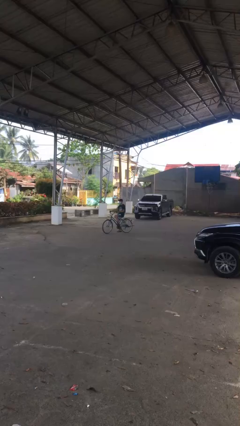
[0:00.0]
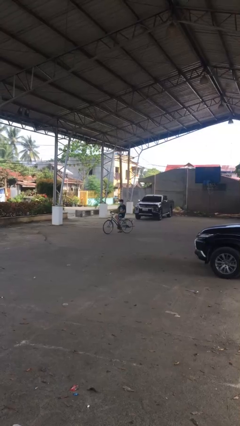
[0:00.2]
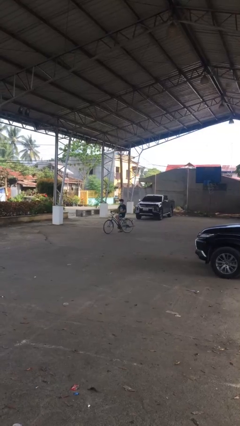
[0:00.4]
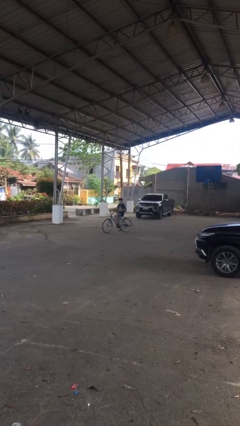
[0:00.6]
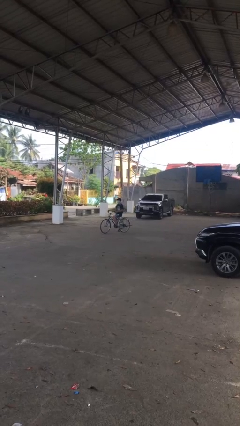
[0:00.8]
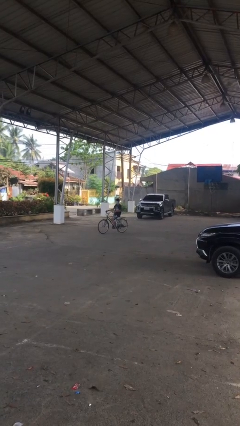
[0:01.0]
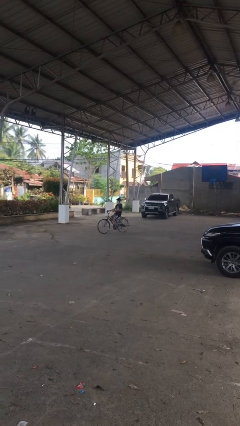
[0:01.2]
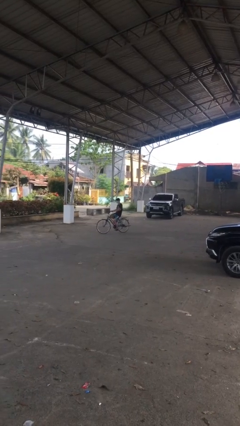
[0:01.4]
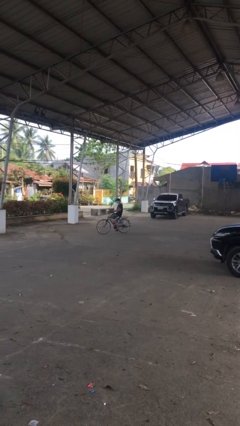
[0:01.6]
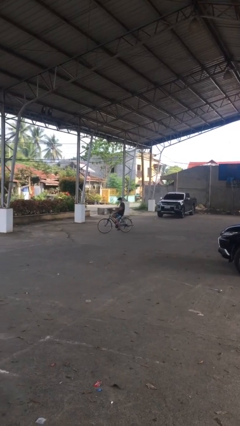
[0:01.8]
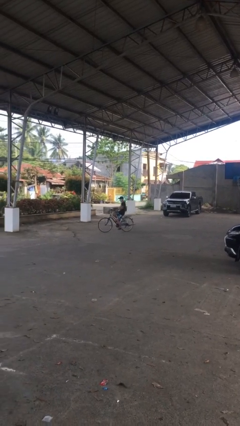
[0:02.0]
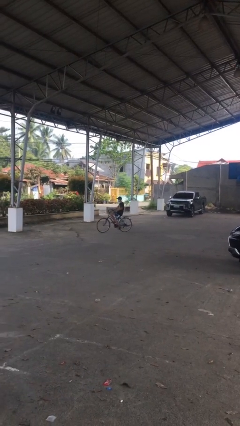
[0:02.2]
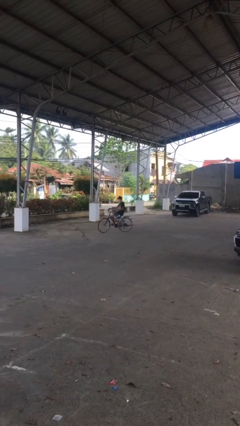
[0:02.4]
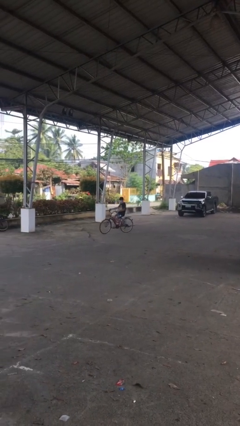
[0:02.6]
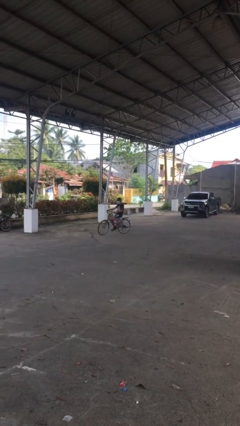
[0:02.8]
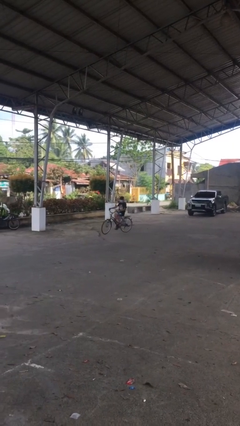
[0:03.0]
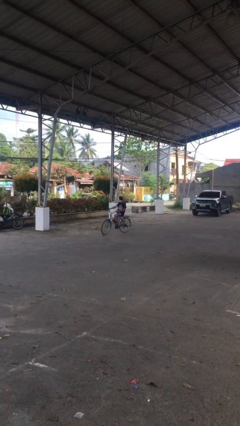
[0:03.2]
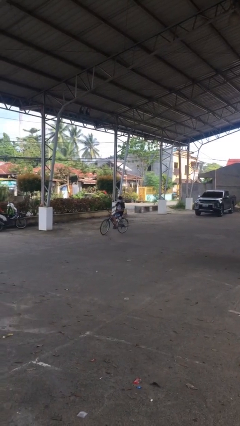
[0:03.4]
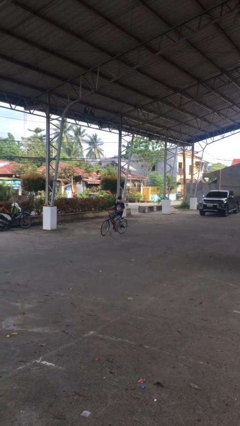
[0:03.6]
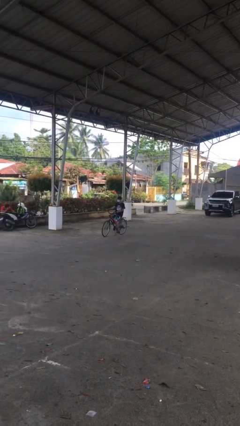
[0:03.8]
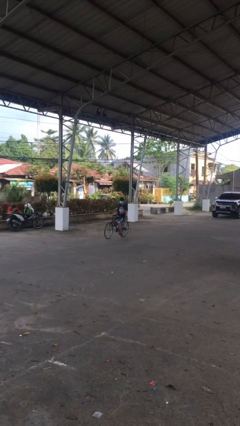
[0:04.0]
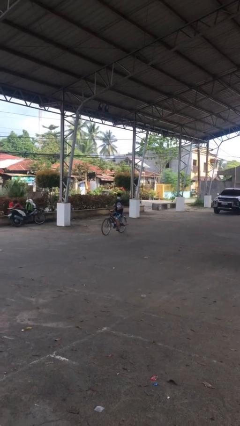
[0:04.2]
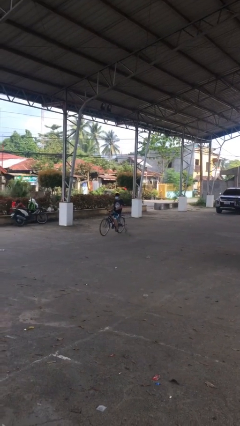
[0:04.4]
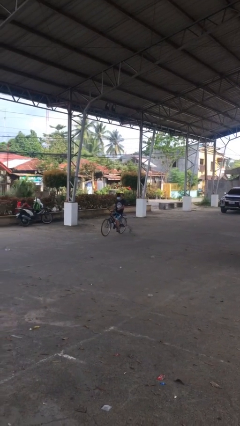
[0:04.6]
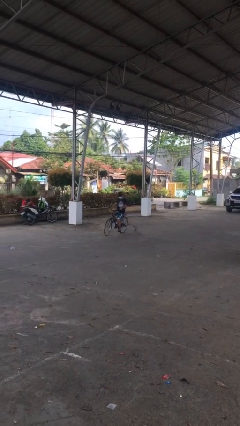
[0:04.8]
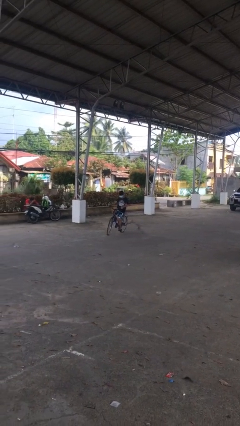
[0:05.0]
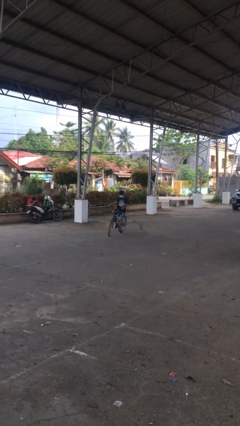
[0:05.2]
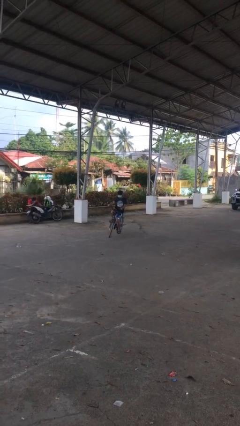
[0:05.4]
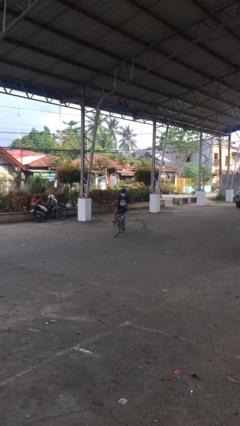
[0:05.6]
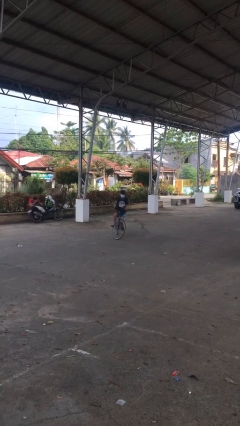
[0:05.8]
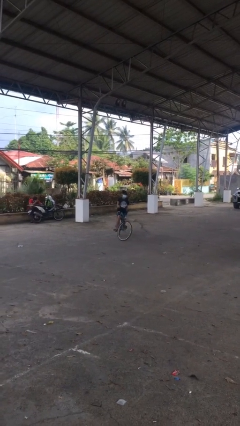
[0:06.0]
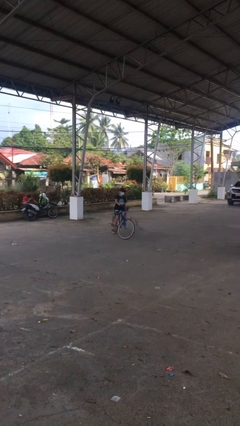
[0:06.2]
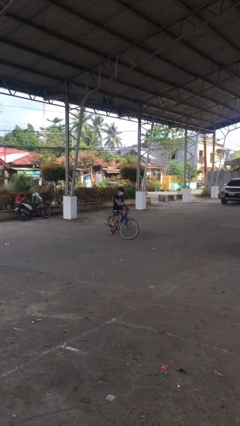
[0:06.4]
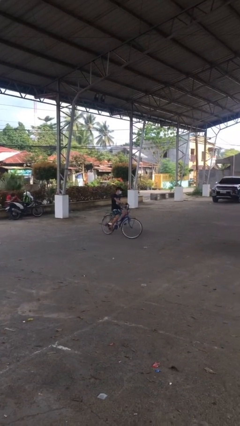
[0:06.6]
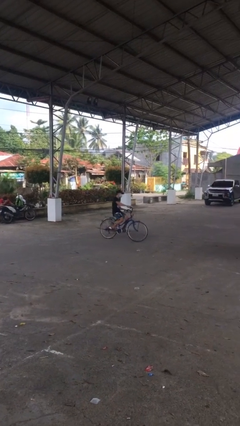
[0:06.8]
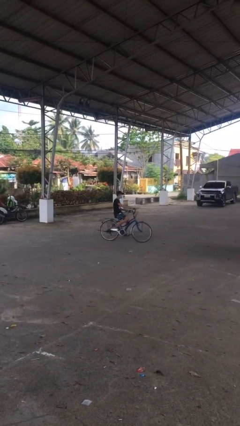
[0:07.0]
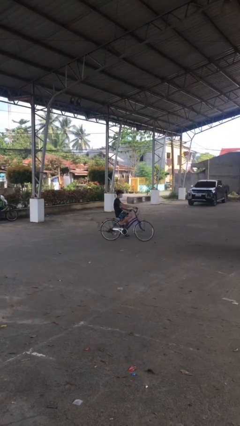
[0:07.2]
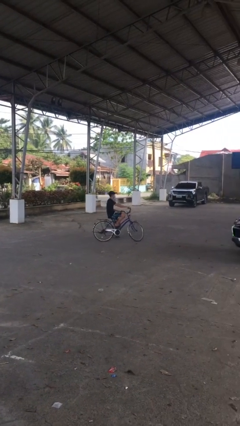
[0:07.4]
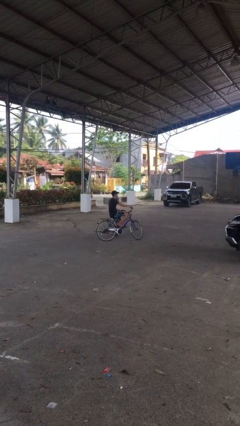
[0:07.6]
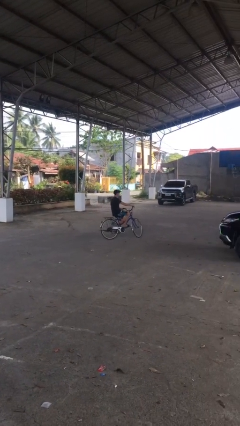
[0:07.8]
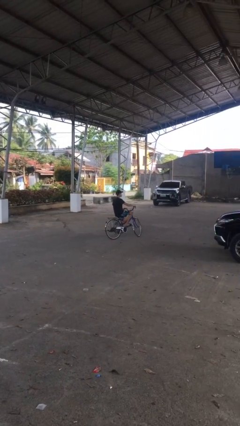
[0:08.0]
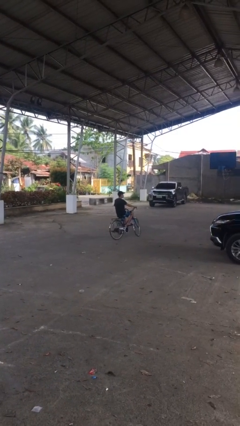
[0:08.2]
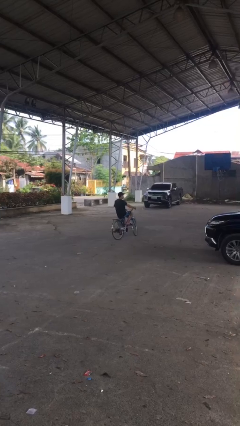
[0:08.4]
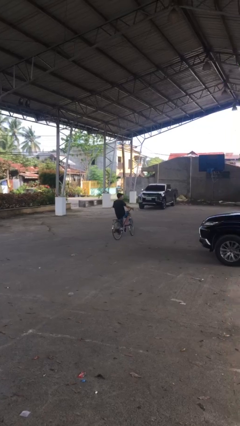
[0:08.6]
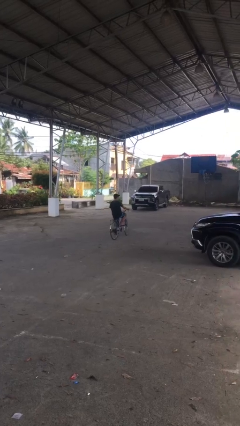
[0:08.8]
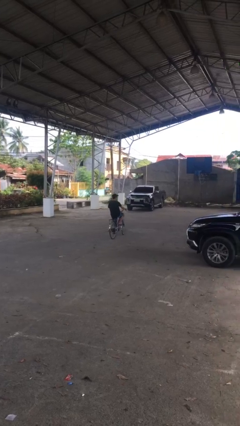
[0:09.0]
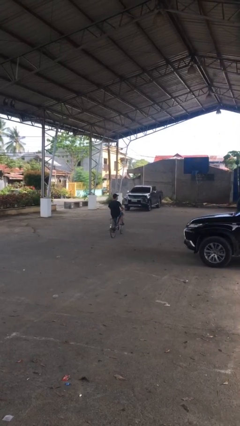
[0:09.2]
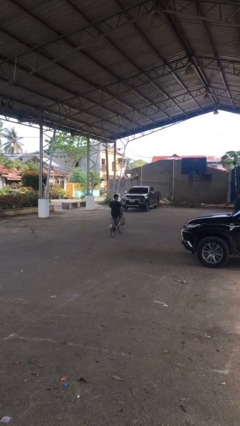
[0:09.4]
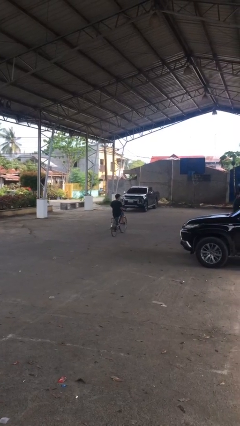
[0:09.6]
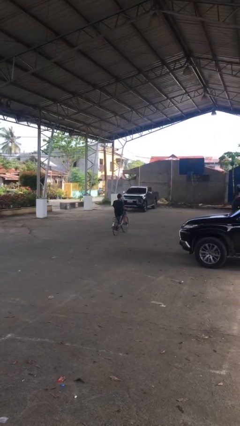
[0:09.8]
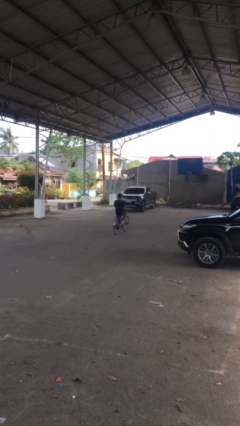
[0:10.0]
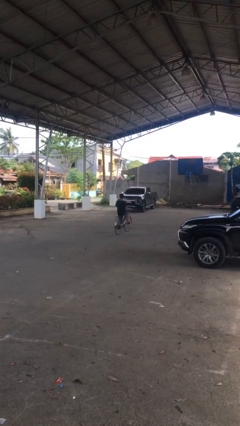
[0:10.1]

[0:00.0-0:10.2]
person rides bicycle

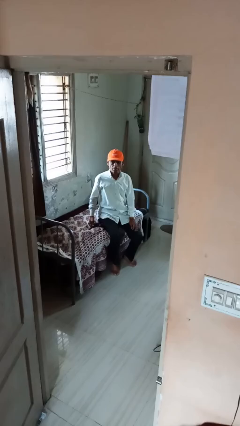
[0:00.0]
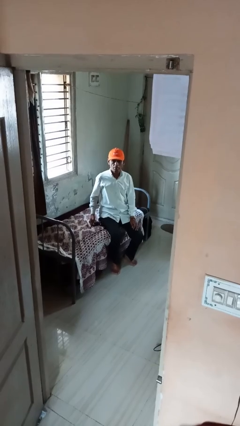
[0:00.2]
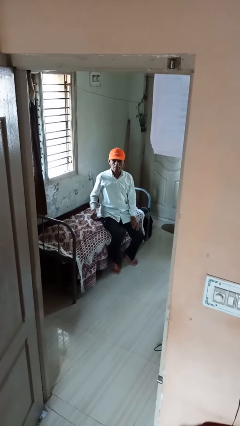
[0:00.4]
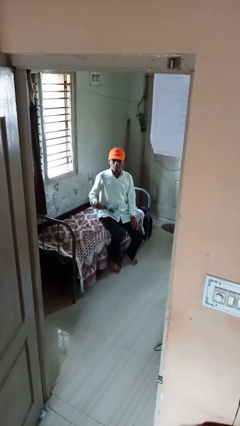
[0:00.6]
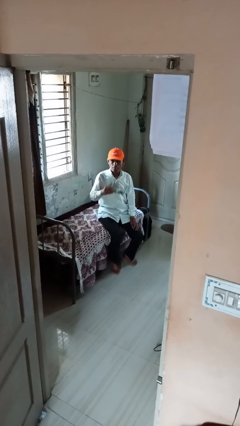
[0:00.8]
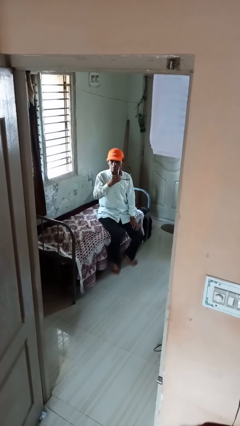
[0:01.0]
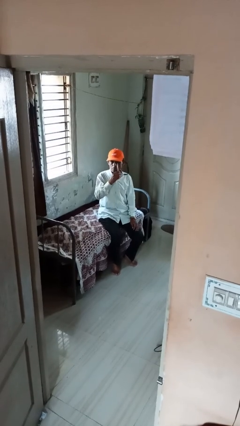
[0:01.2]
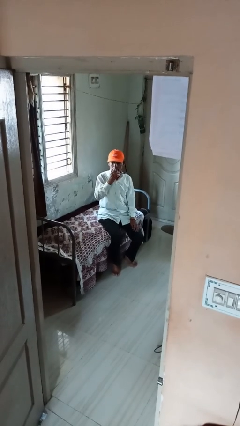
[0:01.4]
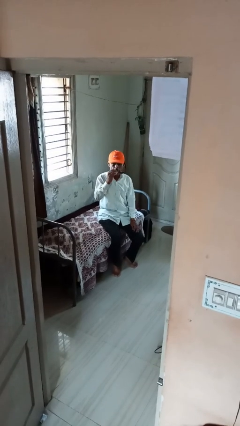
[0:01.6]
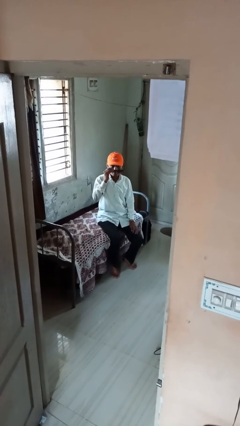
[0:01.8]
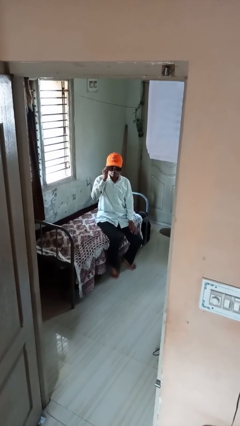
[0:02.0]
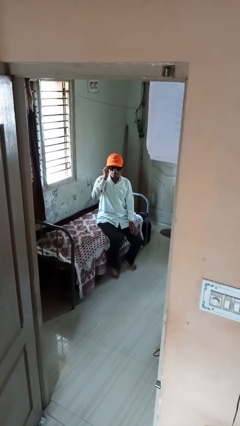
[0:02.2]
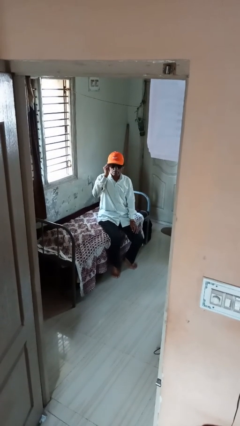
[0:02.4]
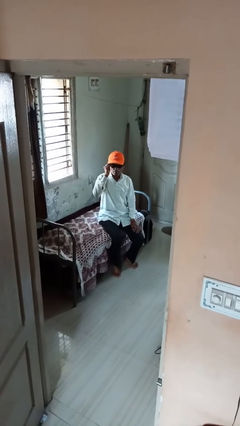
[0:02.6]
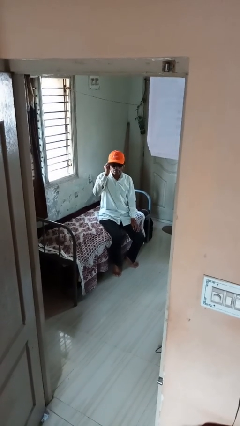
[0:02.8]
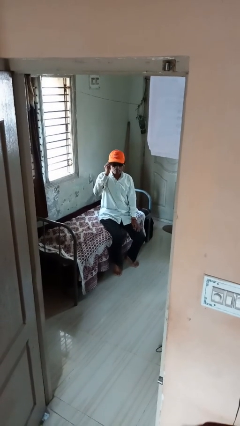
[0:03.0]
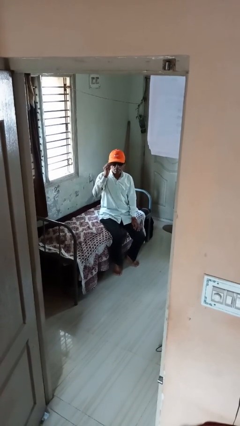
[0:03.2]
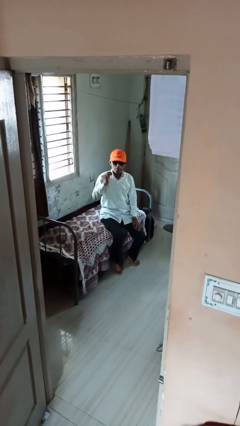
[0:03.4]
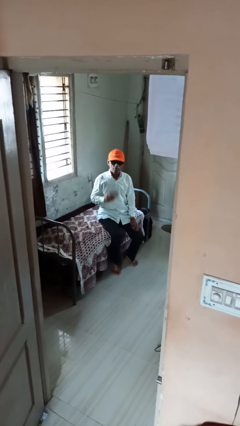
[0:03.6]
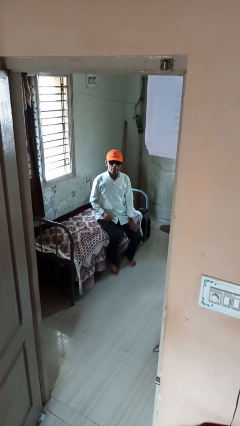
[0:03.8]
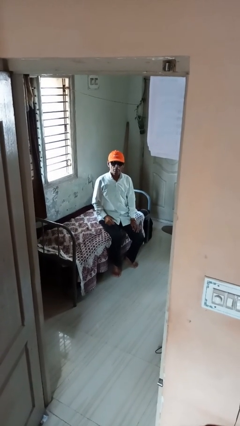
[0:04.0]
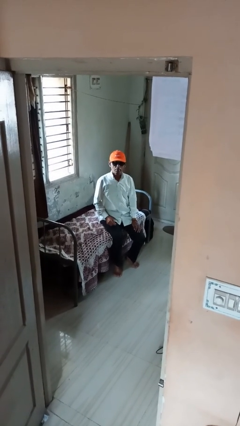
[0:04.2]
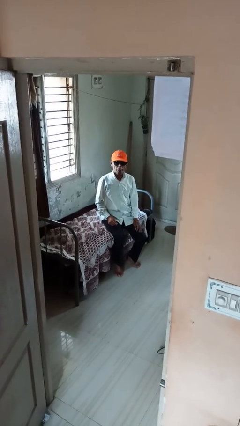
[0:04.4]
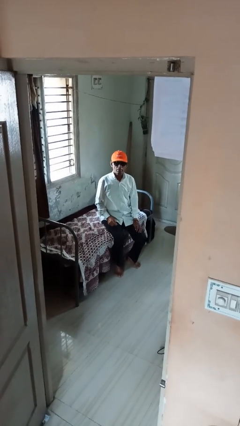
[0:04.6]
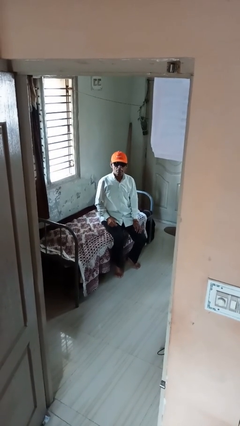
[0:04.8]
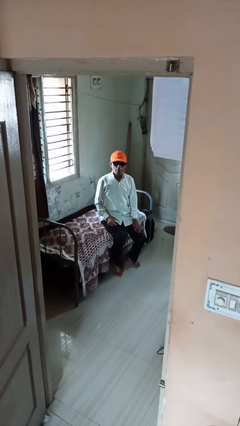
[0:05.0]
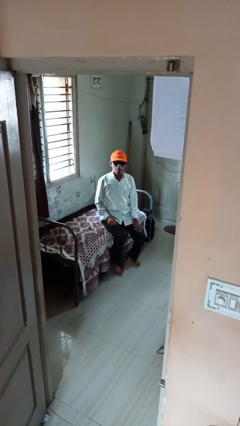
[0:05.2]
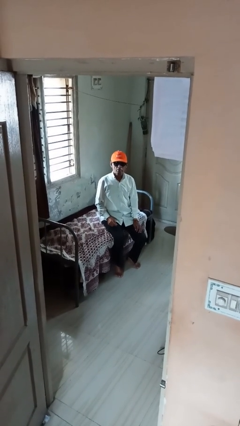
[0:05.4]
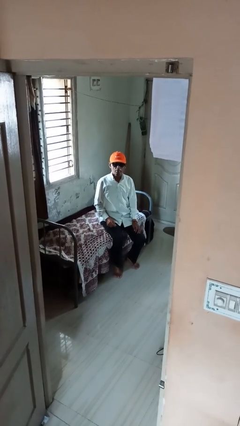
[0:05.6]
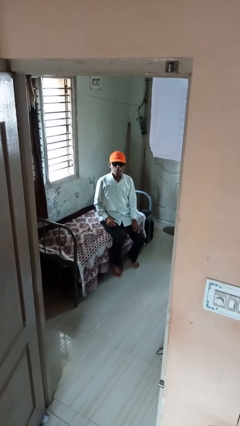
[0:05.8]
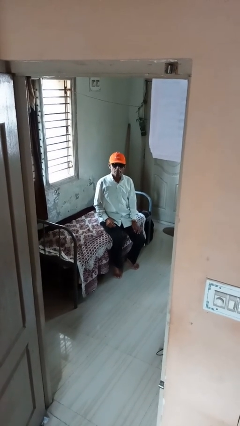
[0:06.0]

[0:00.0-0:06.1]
person puts on sunglasses

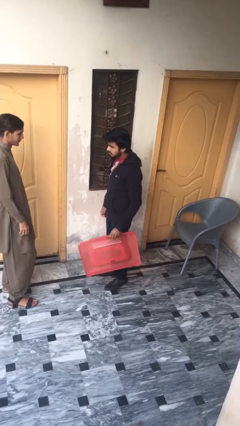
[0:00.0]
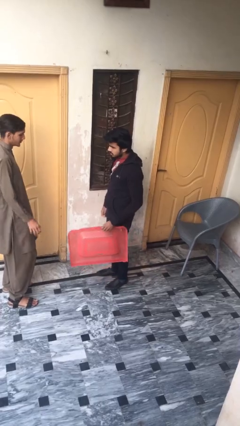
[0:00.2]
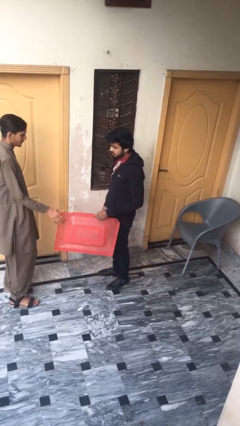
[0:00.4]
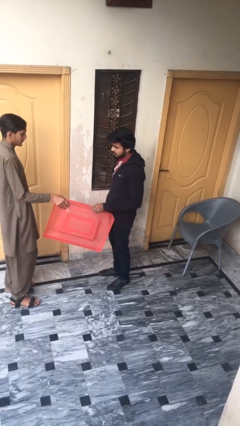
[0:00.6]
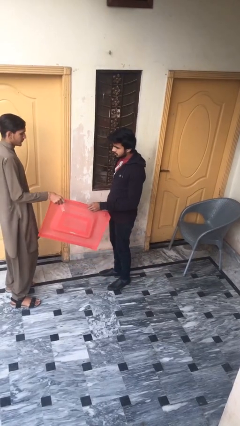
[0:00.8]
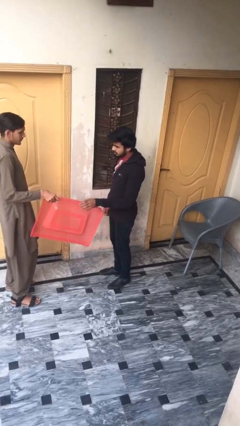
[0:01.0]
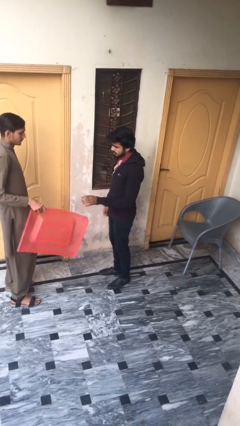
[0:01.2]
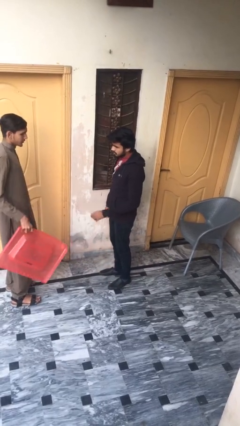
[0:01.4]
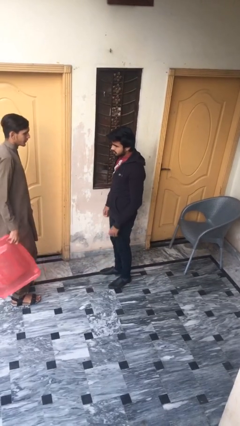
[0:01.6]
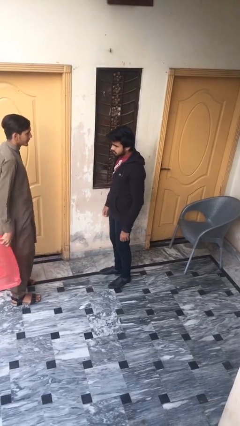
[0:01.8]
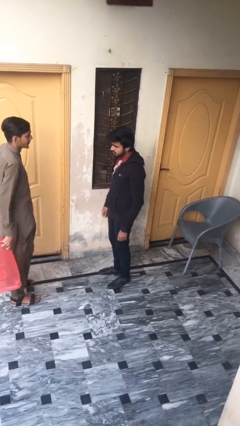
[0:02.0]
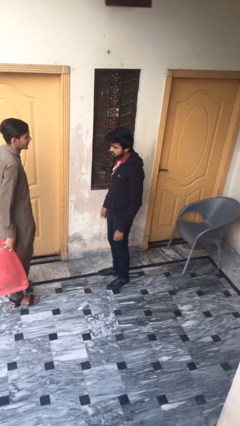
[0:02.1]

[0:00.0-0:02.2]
person transfers object to person
